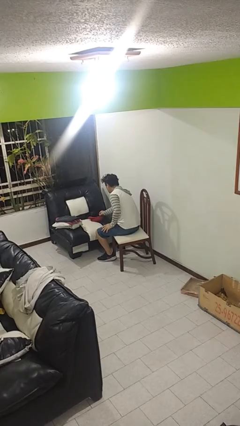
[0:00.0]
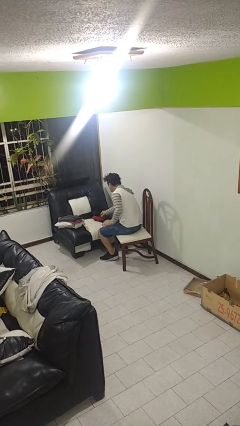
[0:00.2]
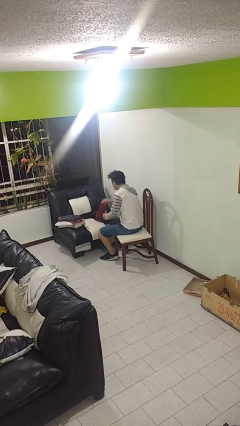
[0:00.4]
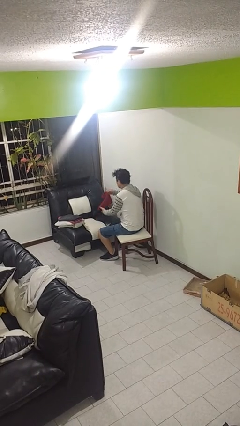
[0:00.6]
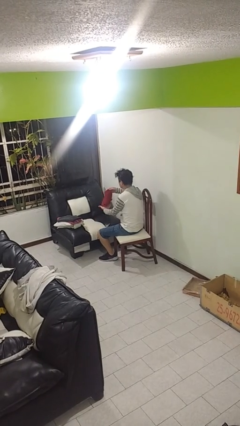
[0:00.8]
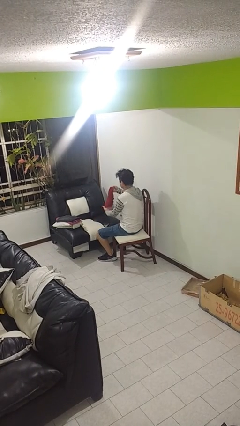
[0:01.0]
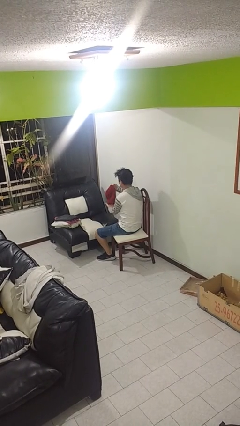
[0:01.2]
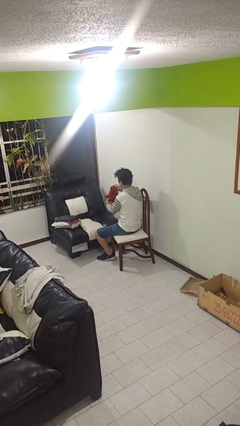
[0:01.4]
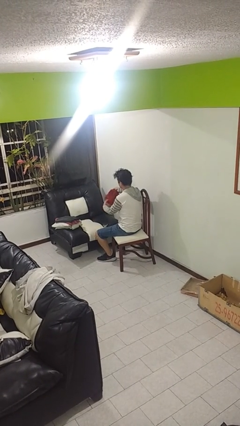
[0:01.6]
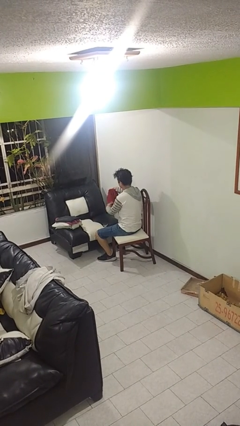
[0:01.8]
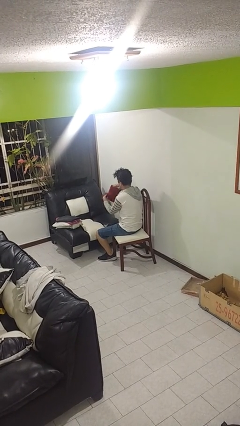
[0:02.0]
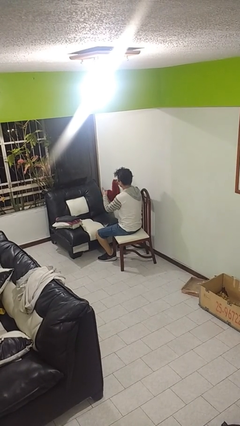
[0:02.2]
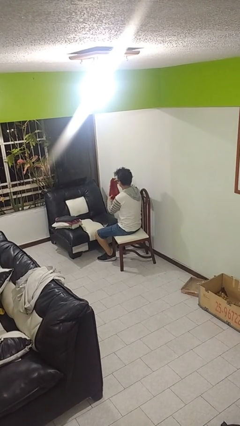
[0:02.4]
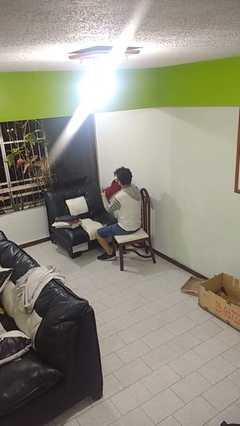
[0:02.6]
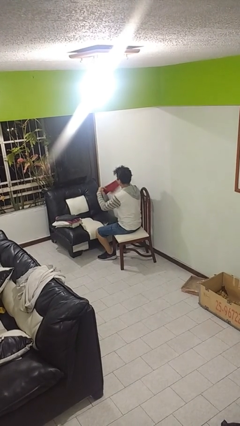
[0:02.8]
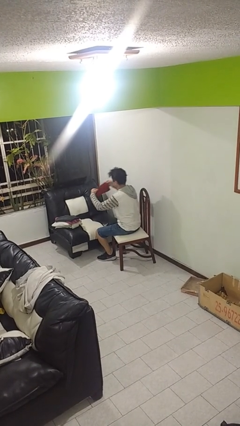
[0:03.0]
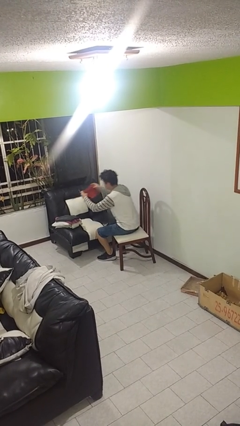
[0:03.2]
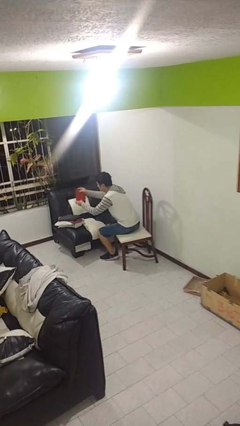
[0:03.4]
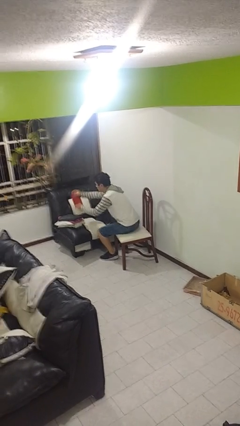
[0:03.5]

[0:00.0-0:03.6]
person folds towel

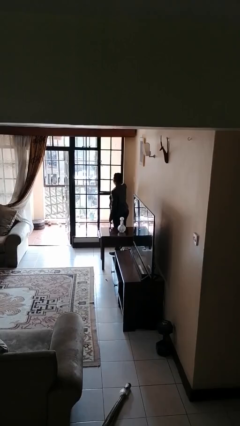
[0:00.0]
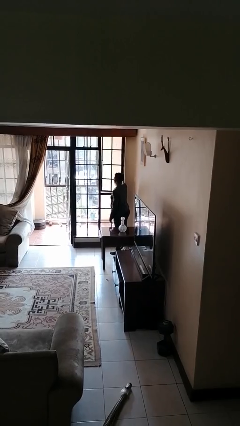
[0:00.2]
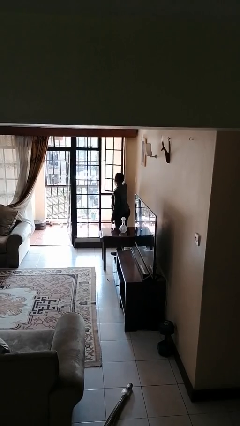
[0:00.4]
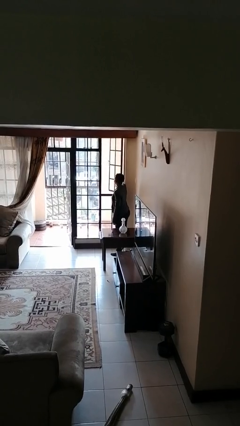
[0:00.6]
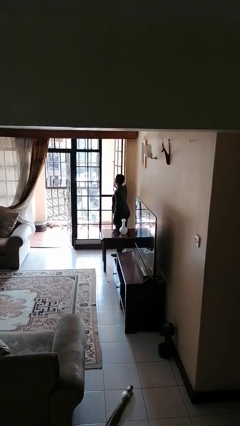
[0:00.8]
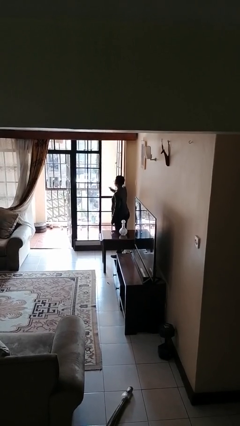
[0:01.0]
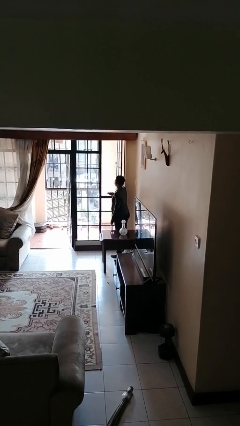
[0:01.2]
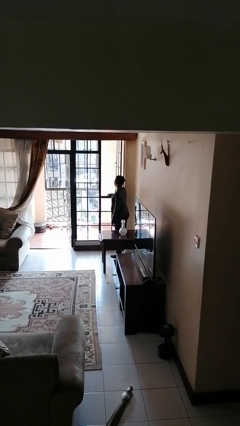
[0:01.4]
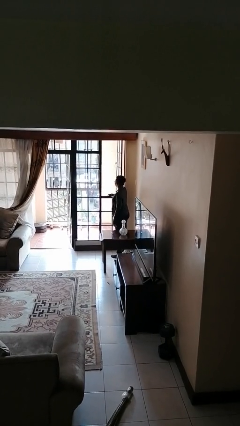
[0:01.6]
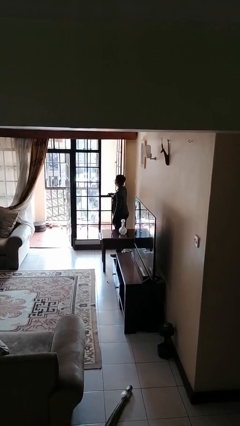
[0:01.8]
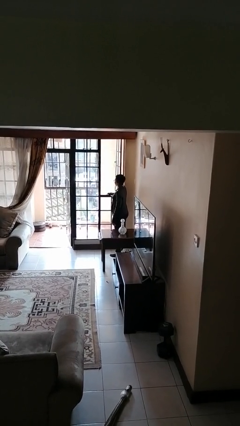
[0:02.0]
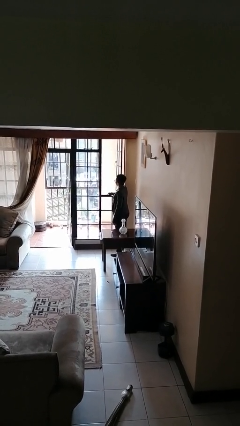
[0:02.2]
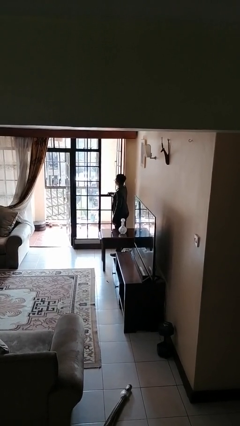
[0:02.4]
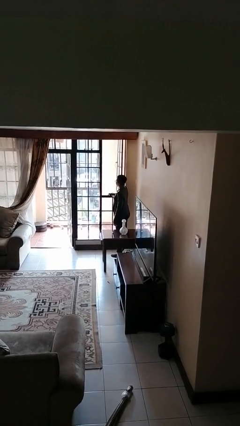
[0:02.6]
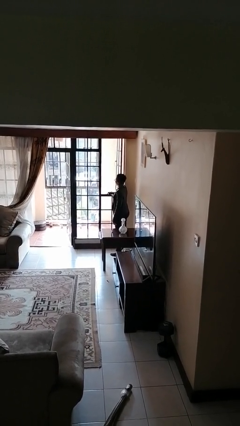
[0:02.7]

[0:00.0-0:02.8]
person opens home window

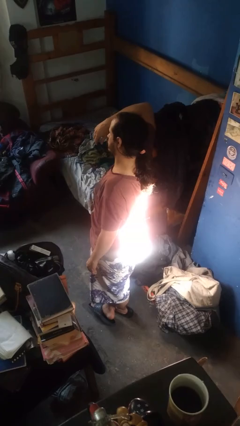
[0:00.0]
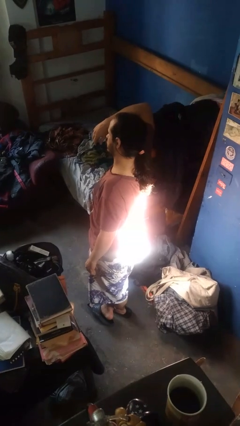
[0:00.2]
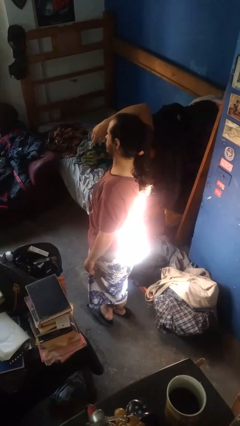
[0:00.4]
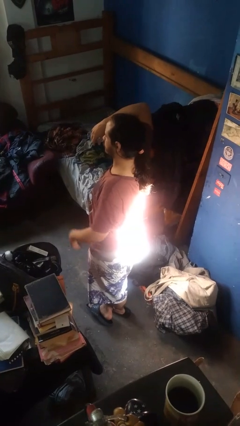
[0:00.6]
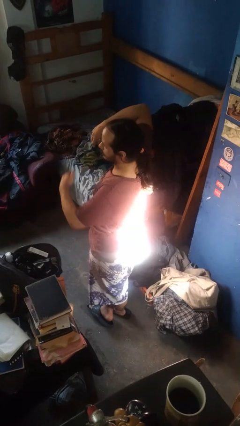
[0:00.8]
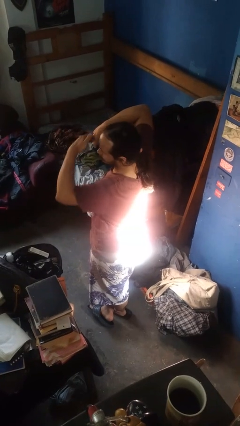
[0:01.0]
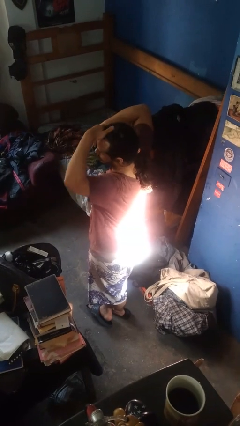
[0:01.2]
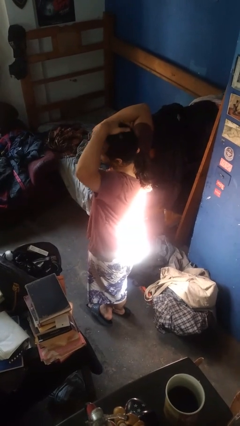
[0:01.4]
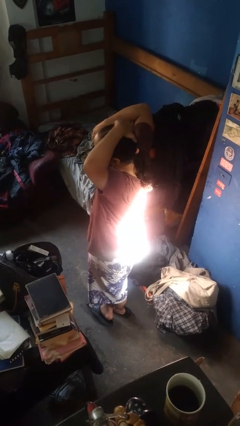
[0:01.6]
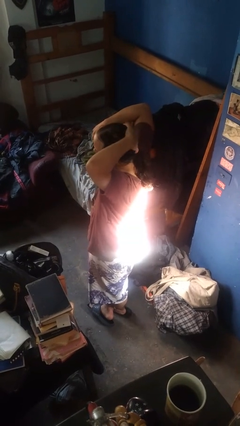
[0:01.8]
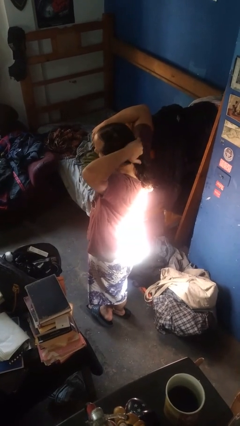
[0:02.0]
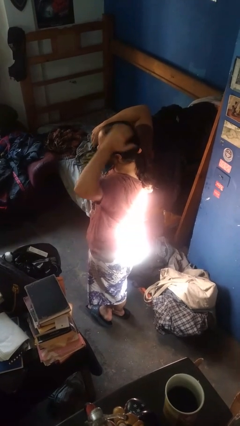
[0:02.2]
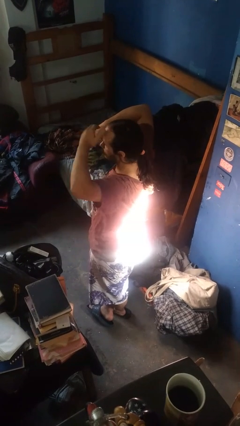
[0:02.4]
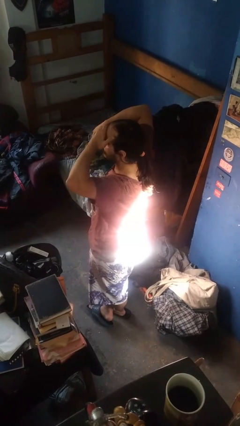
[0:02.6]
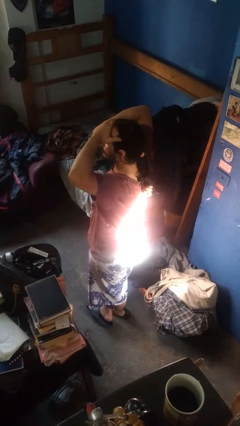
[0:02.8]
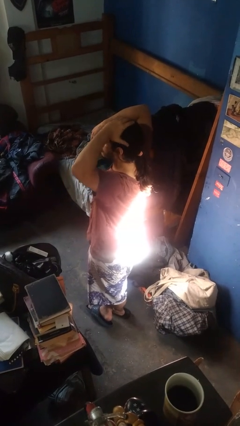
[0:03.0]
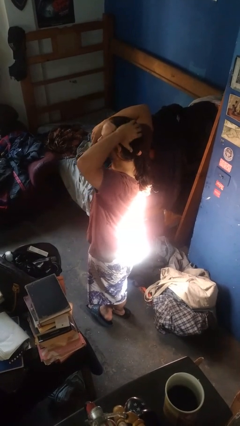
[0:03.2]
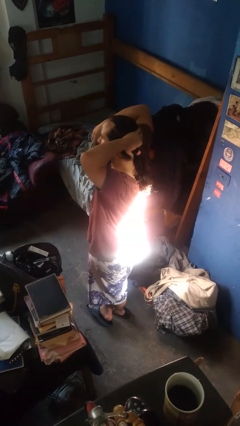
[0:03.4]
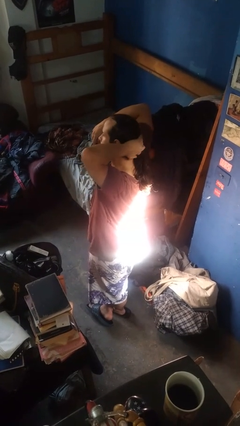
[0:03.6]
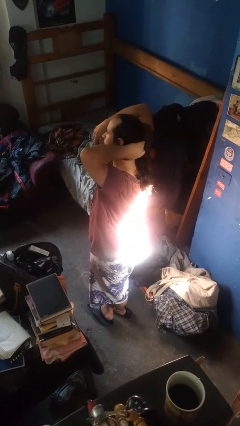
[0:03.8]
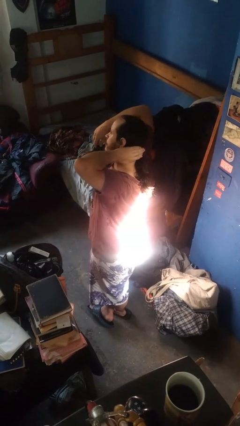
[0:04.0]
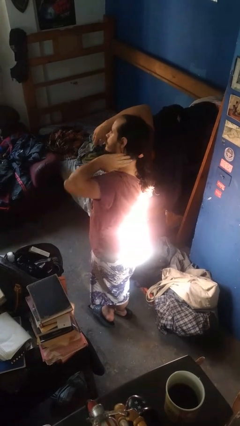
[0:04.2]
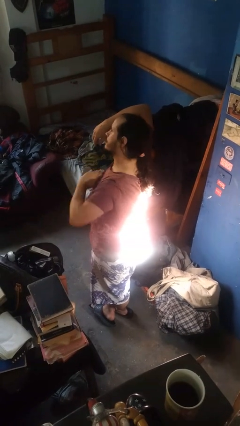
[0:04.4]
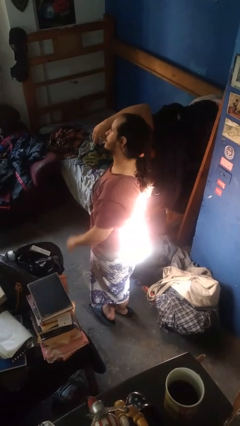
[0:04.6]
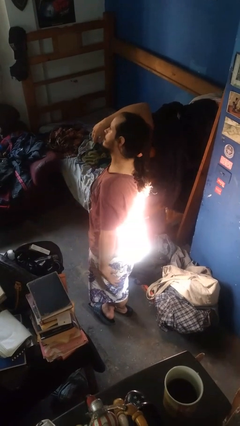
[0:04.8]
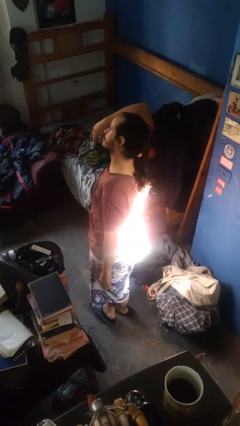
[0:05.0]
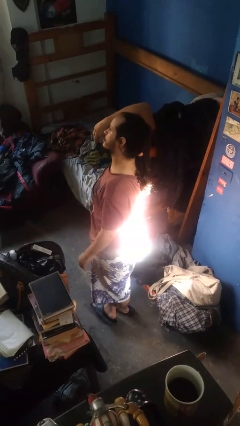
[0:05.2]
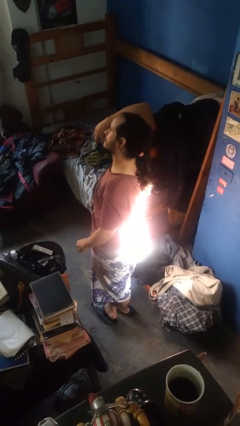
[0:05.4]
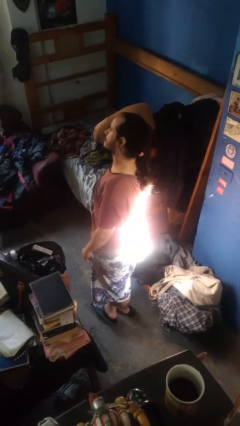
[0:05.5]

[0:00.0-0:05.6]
person strokes hair

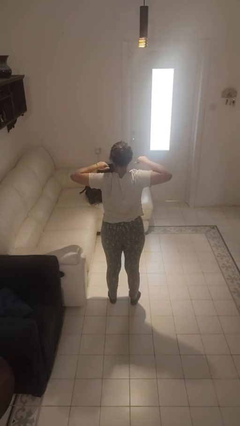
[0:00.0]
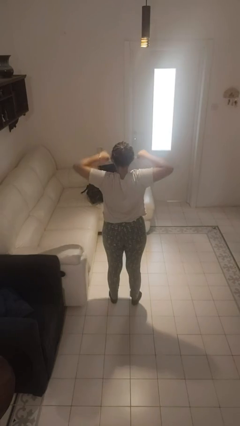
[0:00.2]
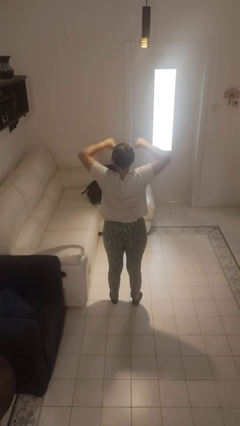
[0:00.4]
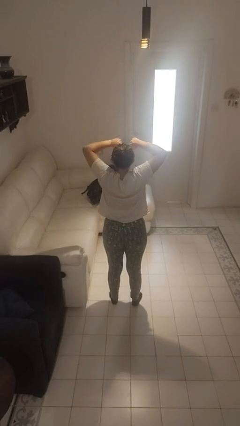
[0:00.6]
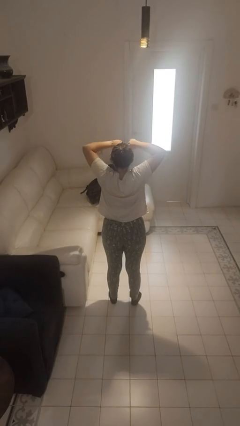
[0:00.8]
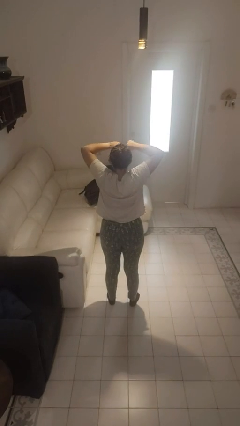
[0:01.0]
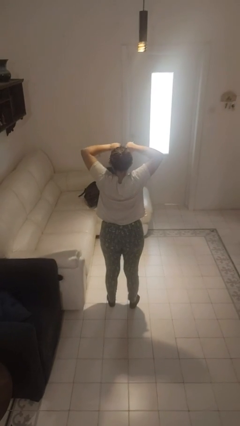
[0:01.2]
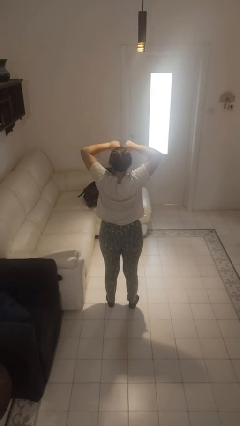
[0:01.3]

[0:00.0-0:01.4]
person stretches arms to side

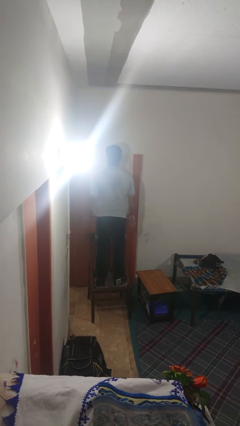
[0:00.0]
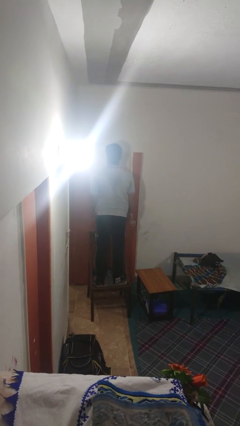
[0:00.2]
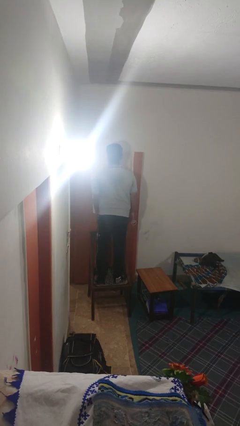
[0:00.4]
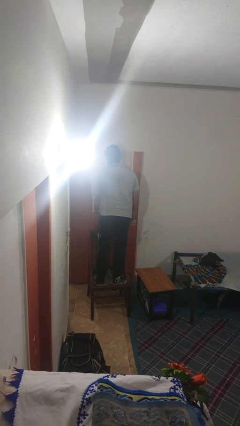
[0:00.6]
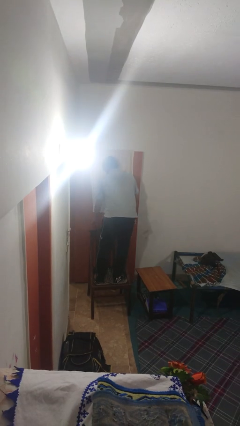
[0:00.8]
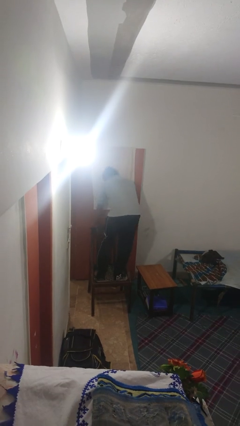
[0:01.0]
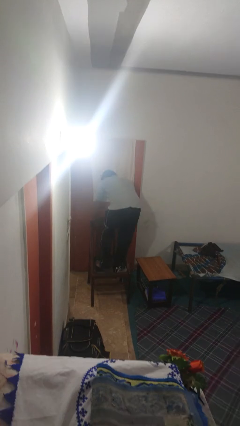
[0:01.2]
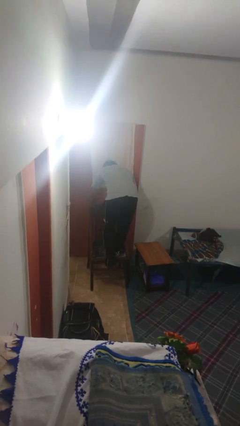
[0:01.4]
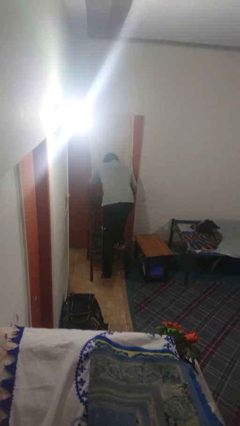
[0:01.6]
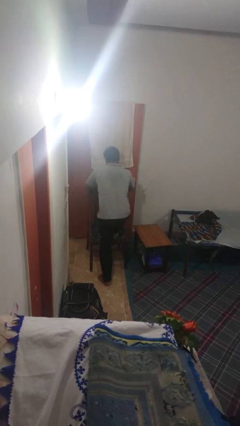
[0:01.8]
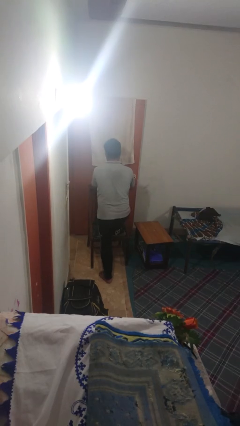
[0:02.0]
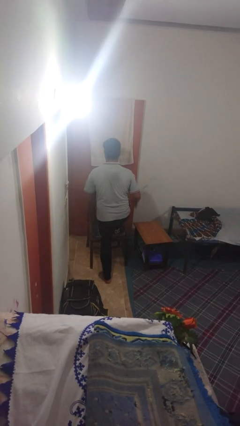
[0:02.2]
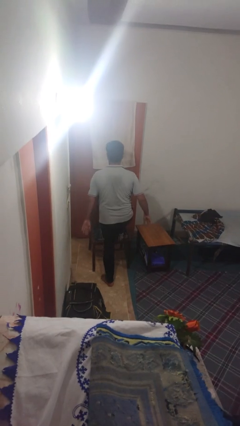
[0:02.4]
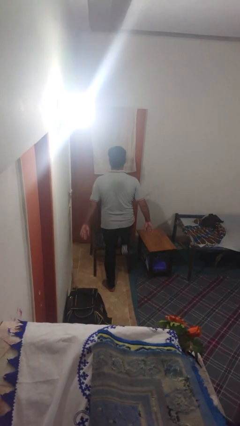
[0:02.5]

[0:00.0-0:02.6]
person climbs off chair

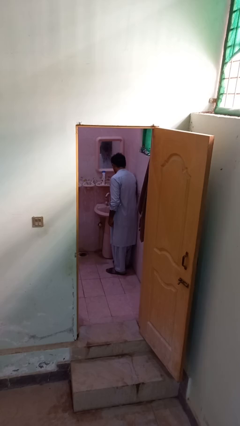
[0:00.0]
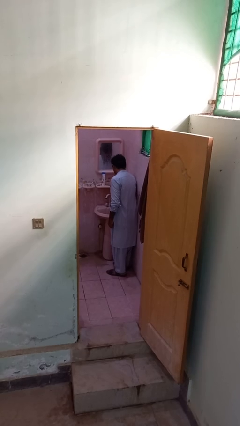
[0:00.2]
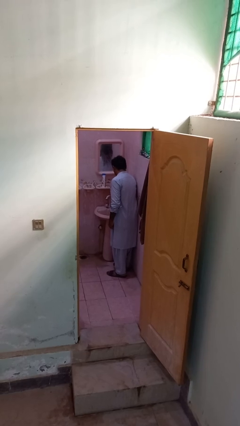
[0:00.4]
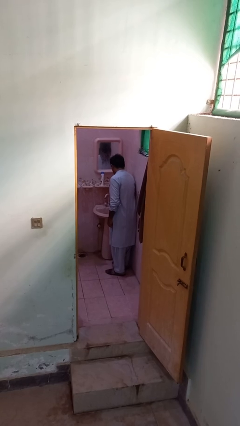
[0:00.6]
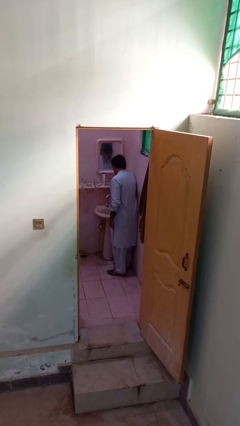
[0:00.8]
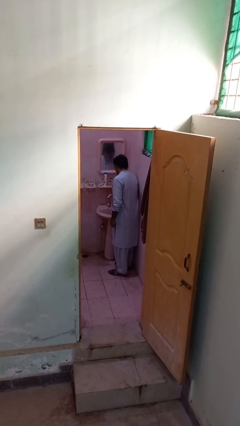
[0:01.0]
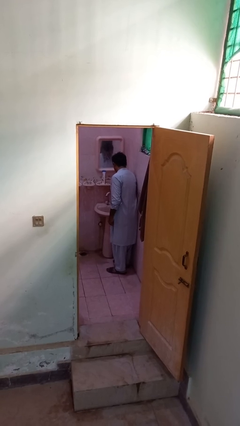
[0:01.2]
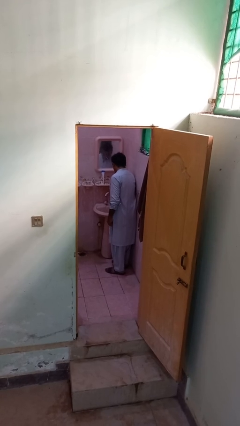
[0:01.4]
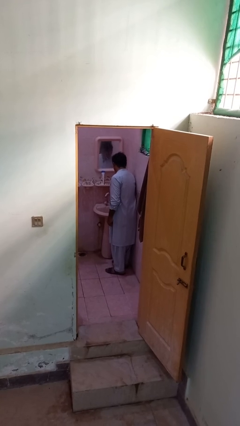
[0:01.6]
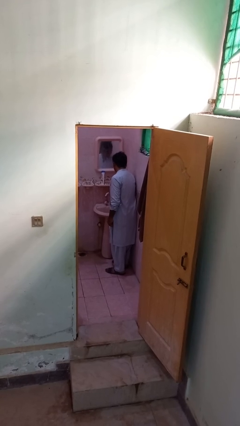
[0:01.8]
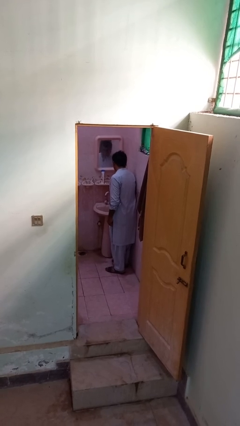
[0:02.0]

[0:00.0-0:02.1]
person turns off faucet
